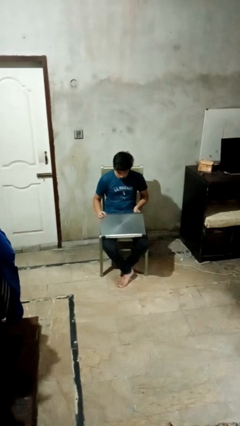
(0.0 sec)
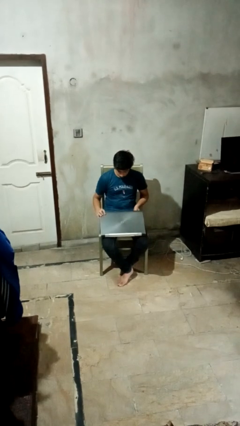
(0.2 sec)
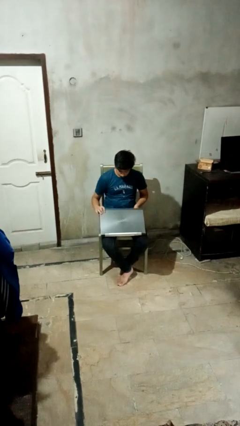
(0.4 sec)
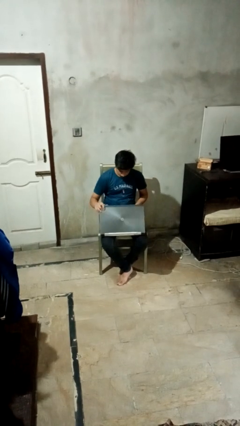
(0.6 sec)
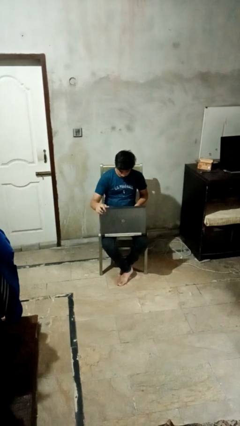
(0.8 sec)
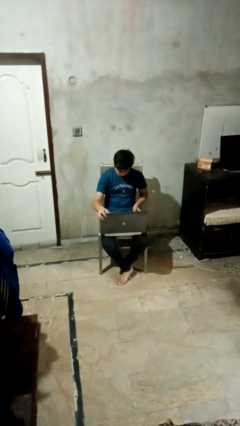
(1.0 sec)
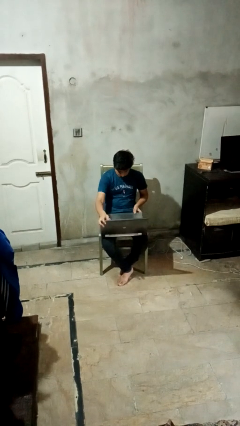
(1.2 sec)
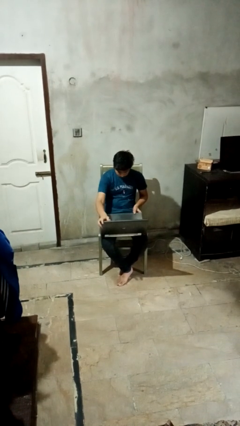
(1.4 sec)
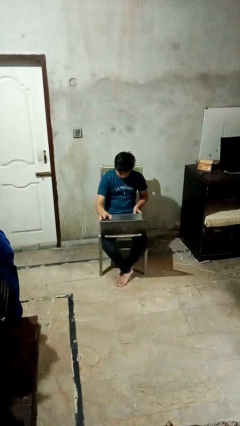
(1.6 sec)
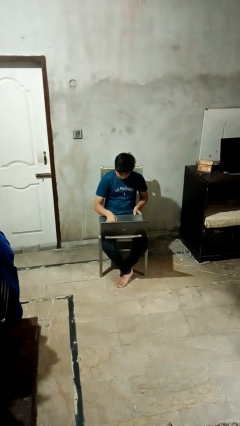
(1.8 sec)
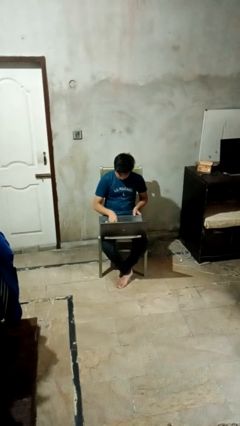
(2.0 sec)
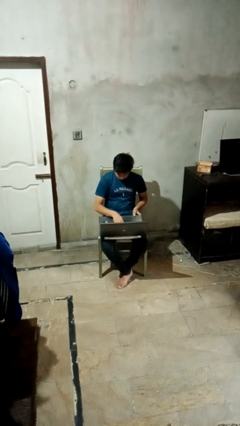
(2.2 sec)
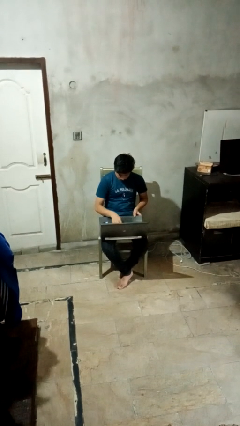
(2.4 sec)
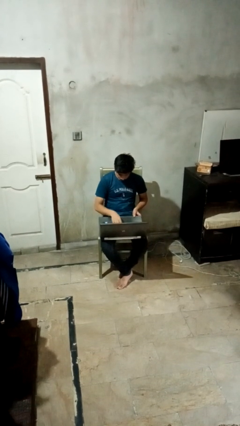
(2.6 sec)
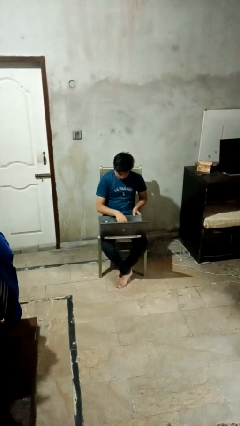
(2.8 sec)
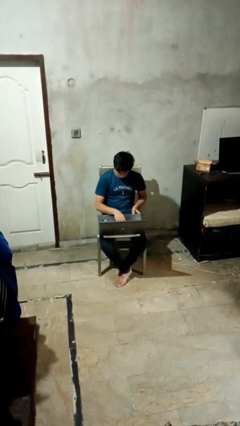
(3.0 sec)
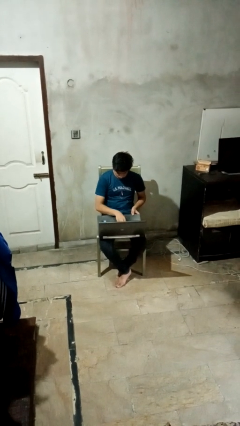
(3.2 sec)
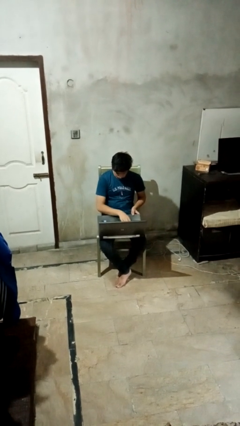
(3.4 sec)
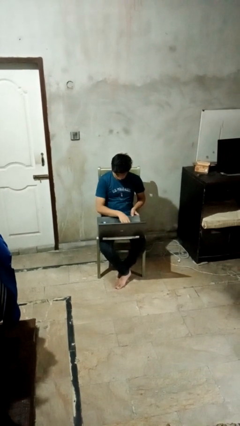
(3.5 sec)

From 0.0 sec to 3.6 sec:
person opens laptop

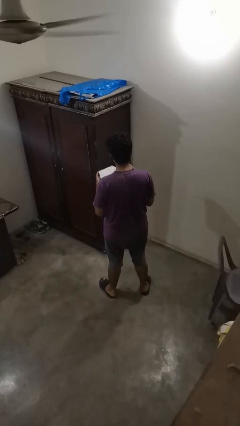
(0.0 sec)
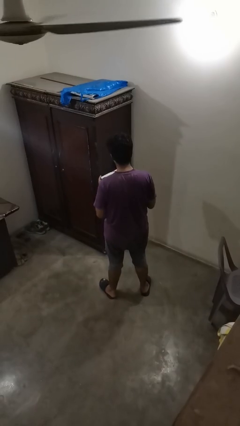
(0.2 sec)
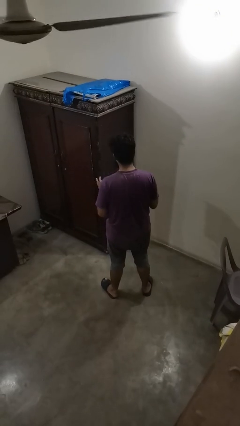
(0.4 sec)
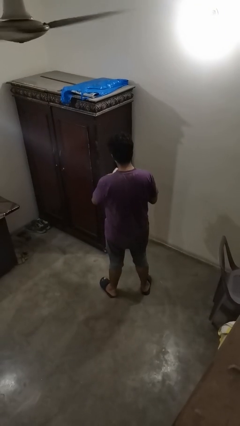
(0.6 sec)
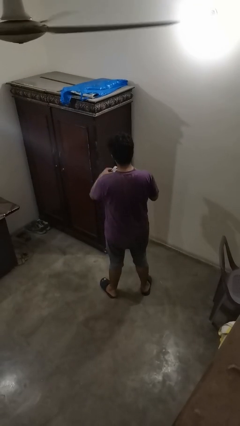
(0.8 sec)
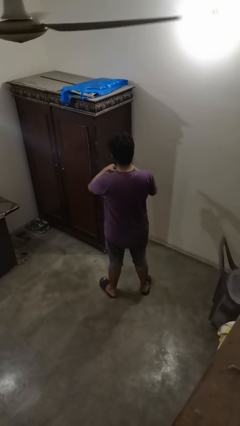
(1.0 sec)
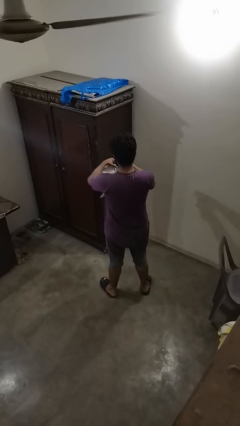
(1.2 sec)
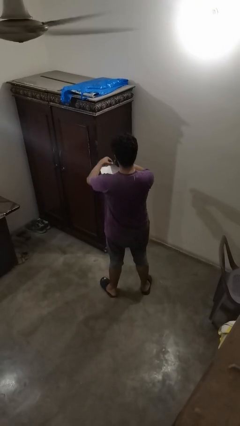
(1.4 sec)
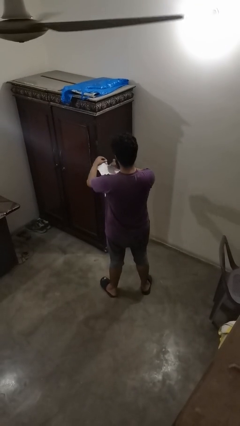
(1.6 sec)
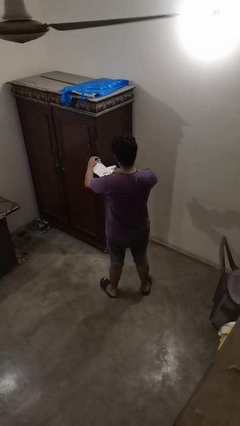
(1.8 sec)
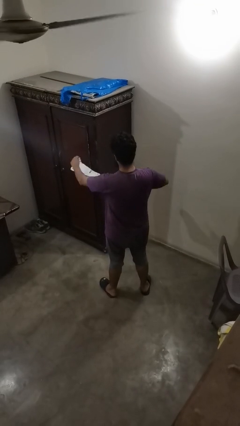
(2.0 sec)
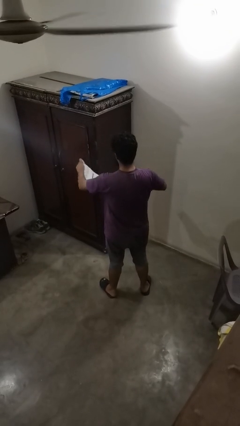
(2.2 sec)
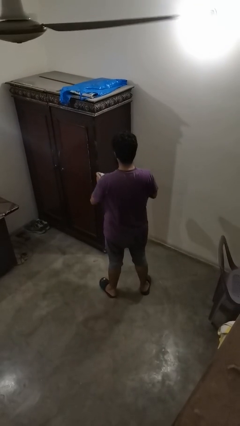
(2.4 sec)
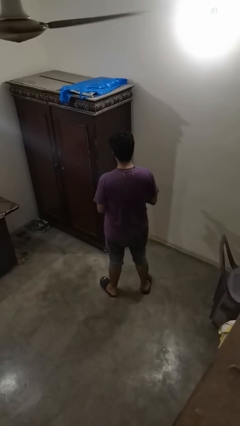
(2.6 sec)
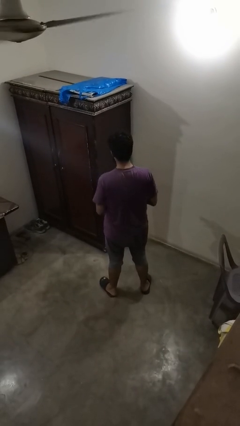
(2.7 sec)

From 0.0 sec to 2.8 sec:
person tears paper

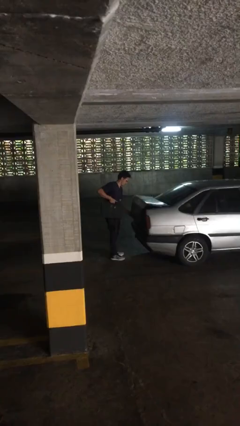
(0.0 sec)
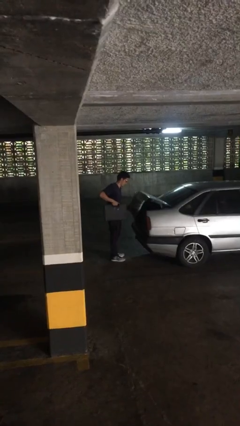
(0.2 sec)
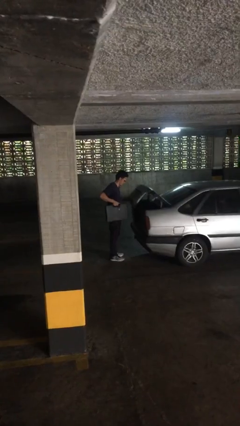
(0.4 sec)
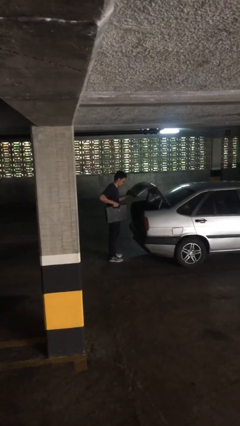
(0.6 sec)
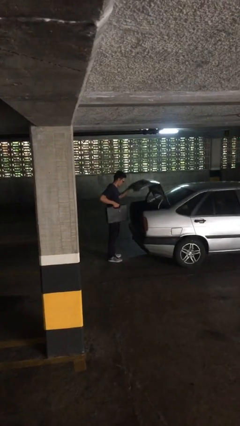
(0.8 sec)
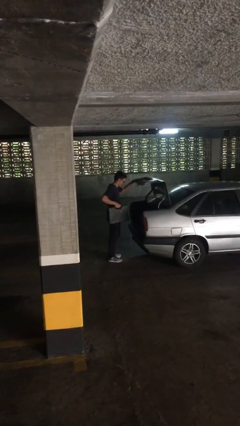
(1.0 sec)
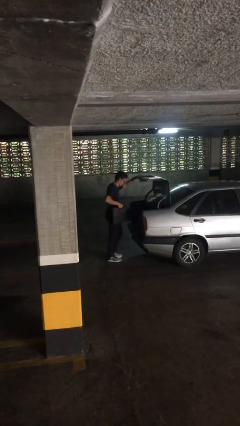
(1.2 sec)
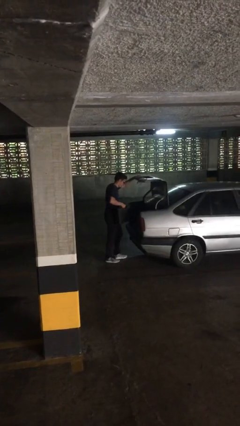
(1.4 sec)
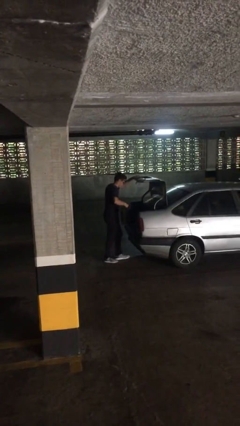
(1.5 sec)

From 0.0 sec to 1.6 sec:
person opens car trunk

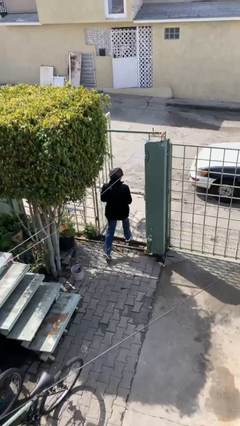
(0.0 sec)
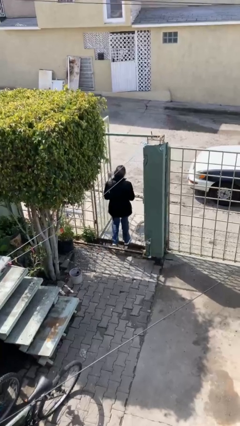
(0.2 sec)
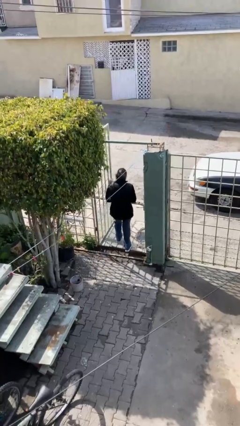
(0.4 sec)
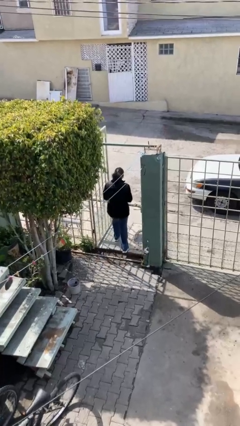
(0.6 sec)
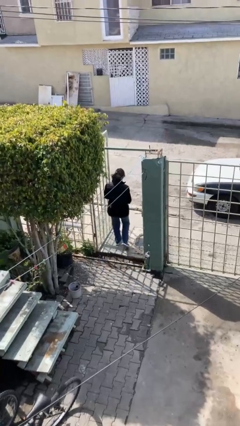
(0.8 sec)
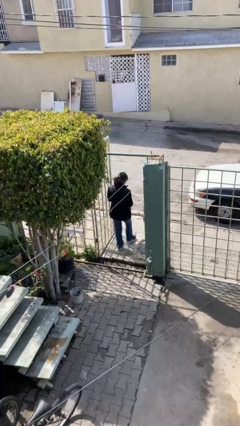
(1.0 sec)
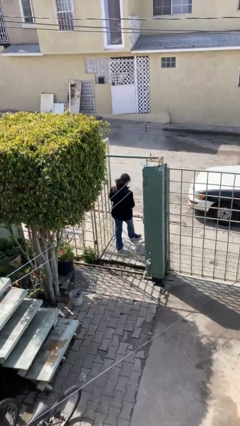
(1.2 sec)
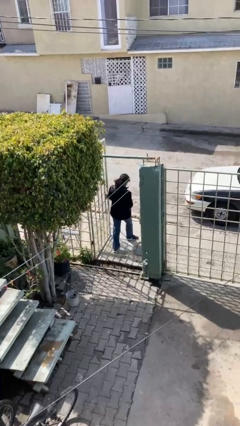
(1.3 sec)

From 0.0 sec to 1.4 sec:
person exits scene through structure

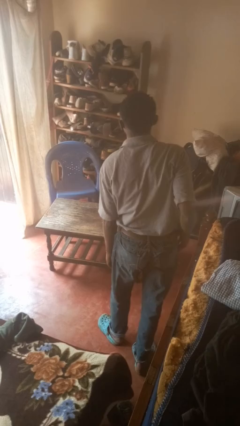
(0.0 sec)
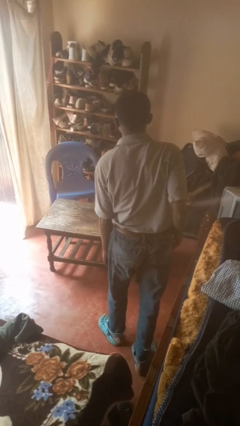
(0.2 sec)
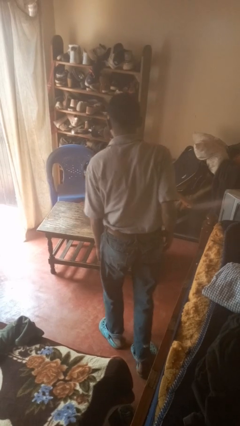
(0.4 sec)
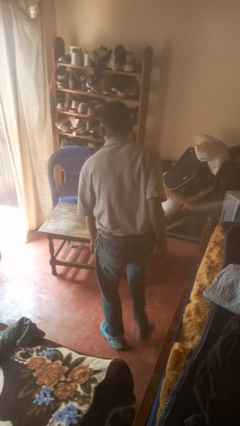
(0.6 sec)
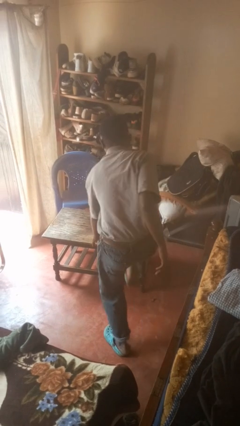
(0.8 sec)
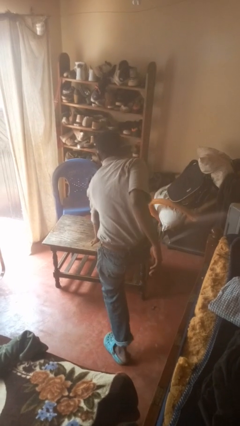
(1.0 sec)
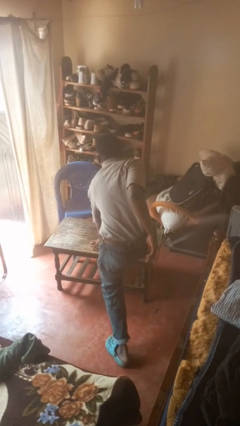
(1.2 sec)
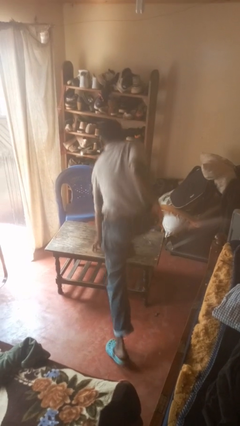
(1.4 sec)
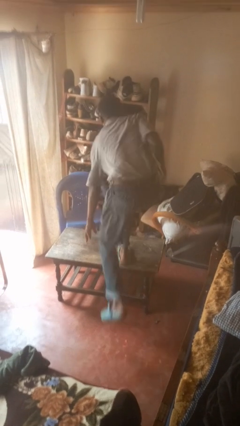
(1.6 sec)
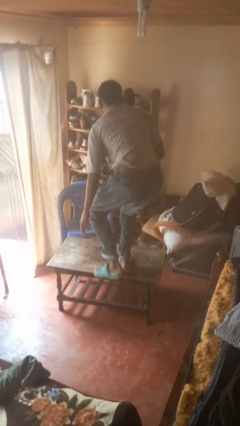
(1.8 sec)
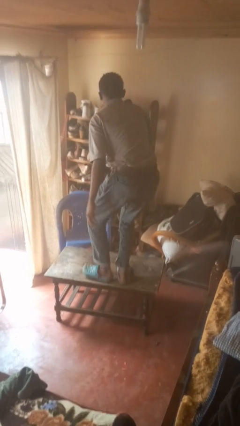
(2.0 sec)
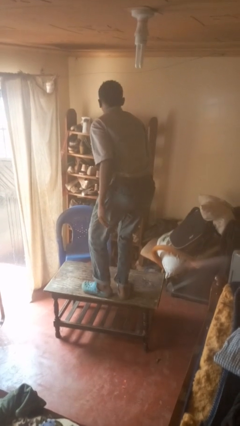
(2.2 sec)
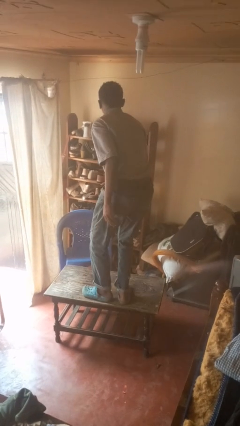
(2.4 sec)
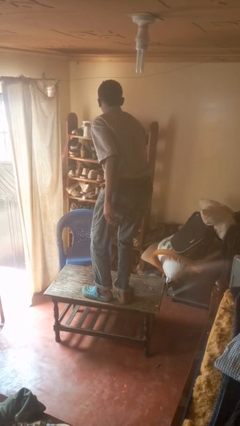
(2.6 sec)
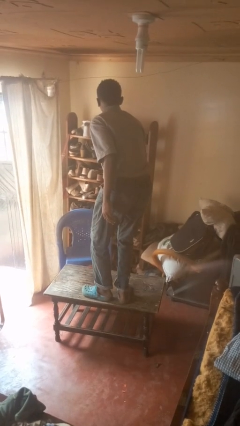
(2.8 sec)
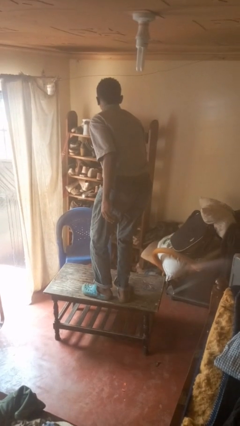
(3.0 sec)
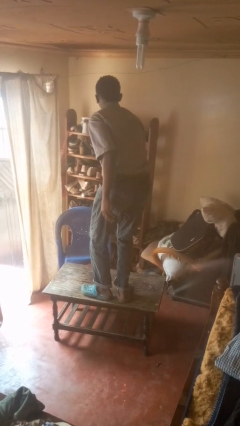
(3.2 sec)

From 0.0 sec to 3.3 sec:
person climbs on table

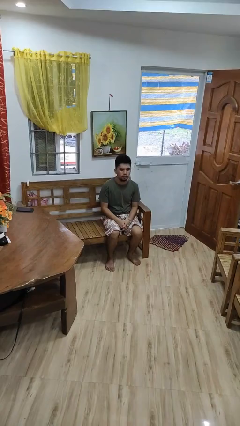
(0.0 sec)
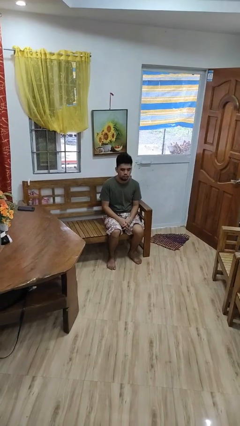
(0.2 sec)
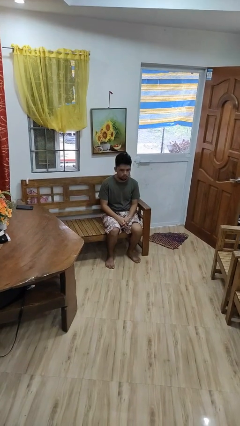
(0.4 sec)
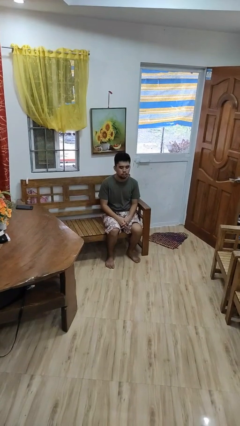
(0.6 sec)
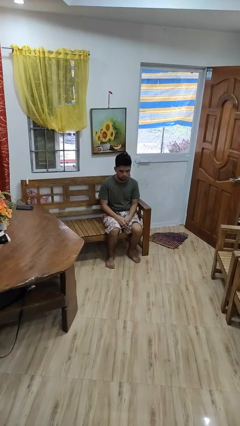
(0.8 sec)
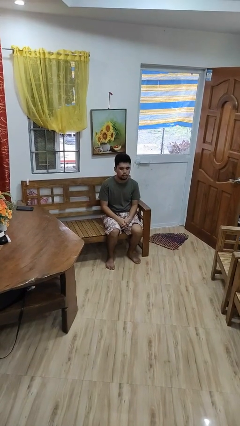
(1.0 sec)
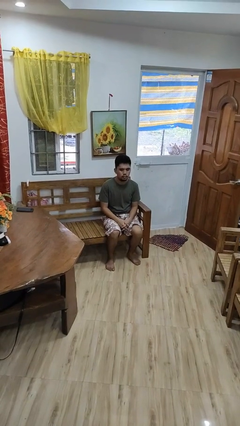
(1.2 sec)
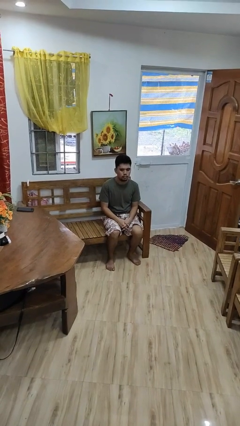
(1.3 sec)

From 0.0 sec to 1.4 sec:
person nods head

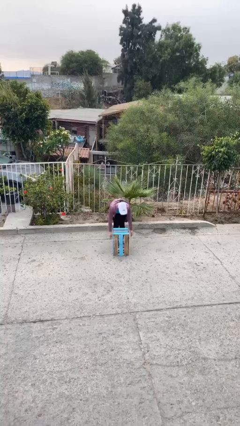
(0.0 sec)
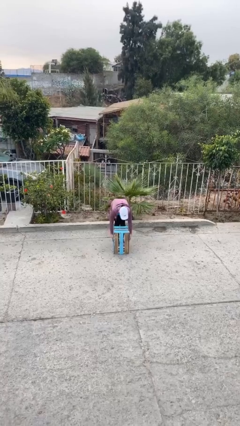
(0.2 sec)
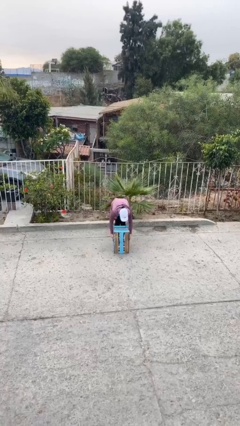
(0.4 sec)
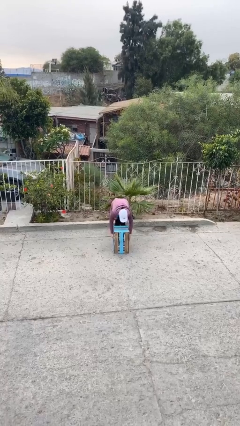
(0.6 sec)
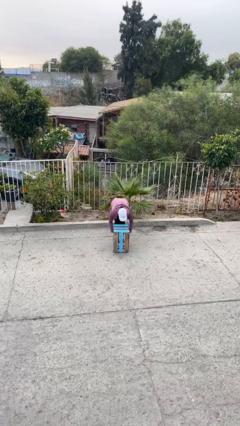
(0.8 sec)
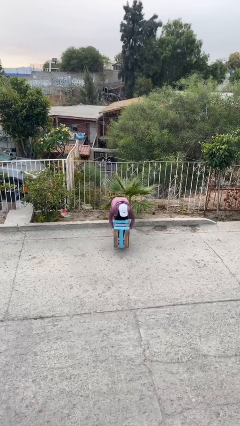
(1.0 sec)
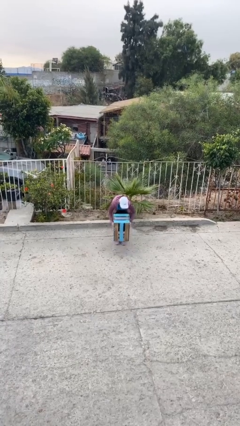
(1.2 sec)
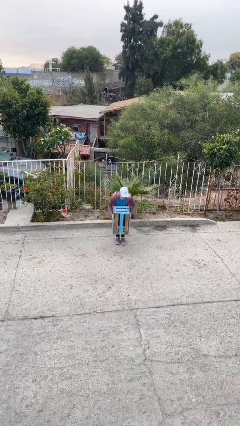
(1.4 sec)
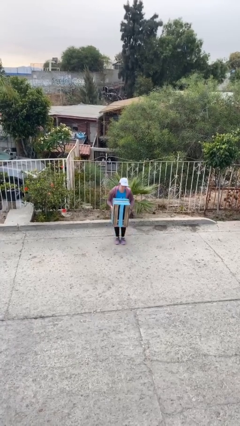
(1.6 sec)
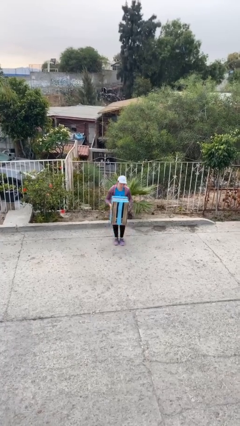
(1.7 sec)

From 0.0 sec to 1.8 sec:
person picks up object from floor

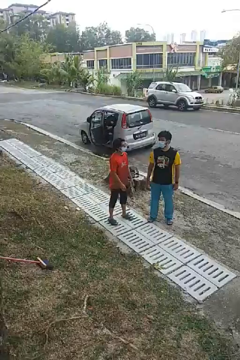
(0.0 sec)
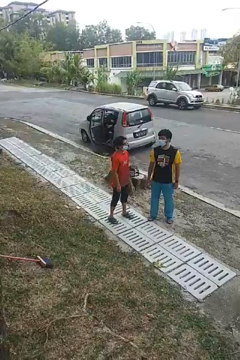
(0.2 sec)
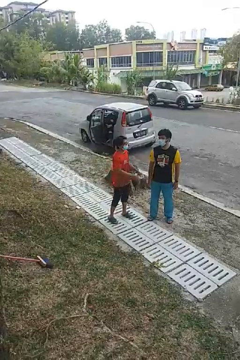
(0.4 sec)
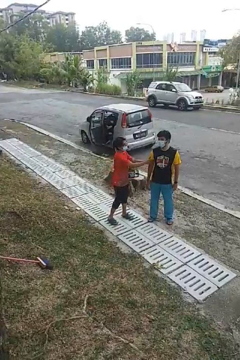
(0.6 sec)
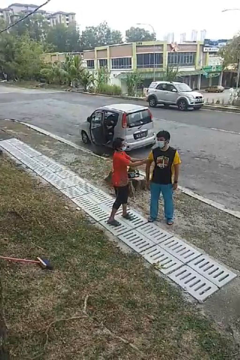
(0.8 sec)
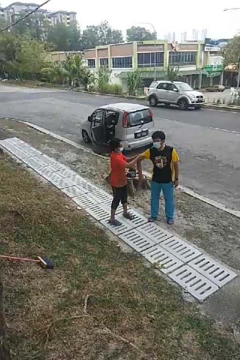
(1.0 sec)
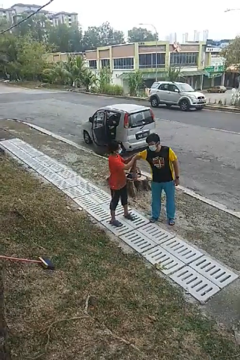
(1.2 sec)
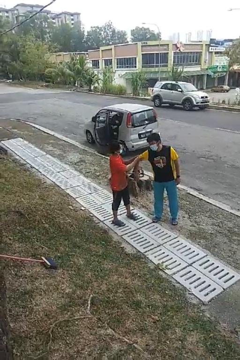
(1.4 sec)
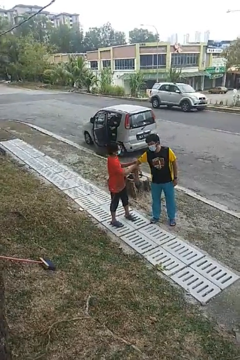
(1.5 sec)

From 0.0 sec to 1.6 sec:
person grabs person by bicep
